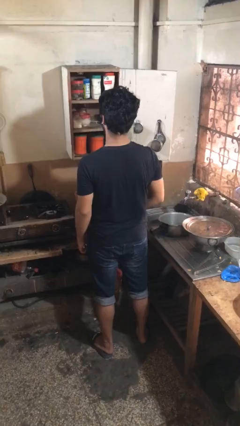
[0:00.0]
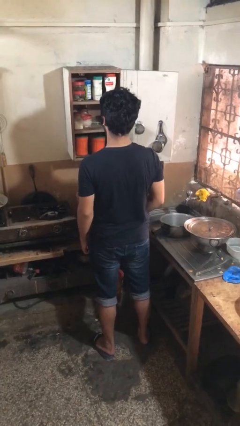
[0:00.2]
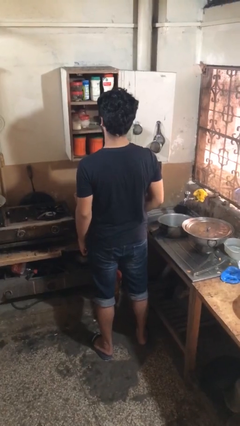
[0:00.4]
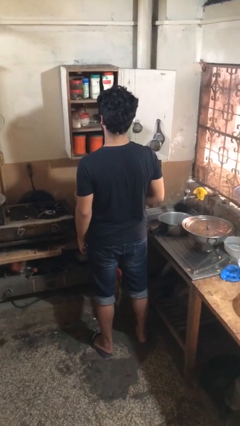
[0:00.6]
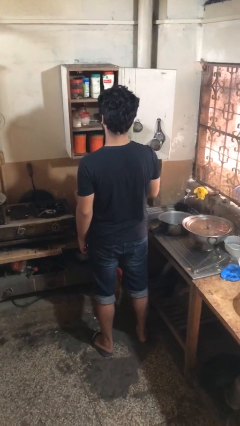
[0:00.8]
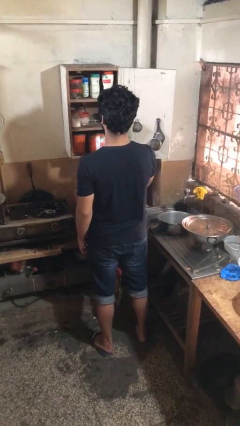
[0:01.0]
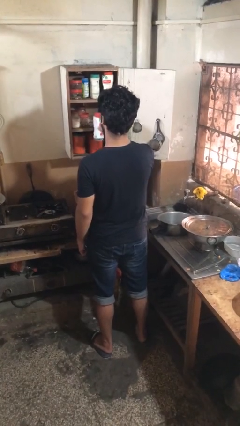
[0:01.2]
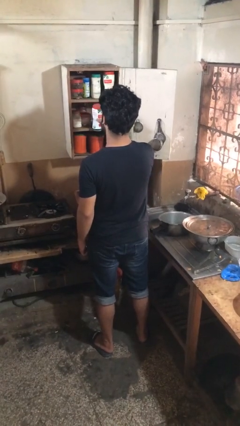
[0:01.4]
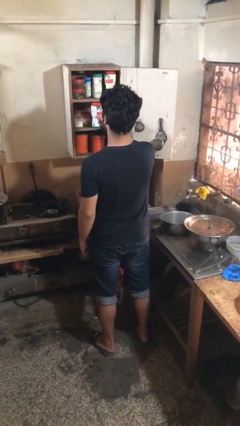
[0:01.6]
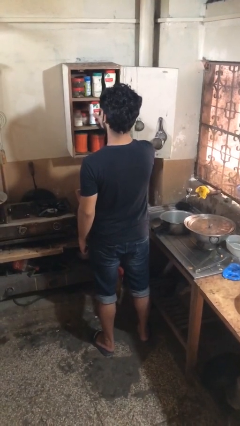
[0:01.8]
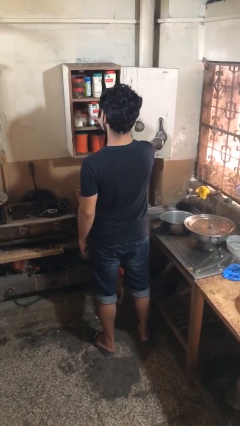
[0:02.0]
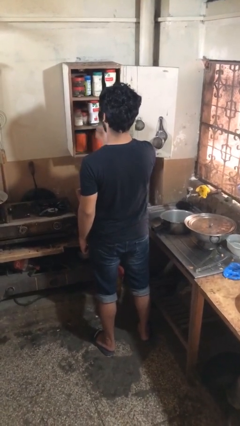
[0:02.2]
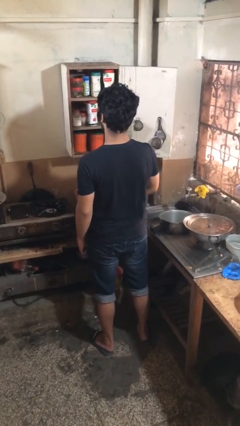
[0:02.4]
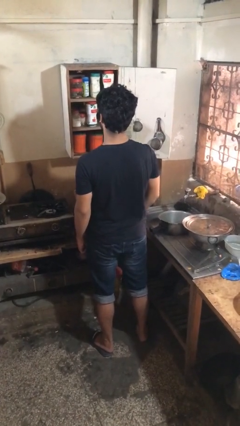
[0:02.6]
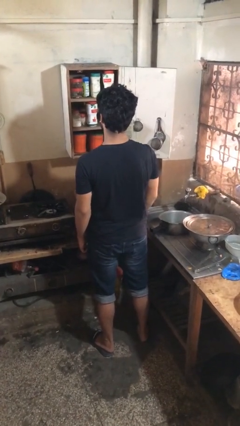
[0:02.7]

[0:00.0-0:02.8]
person puts down object into cabinet

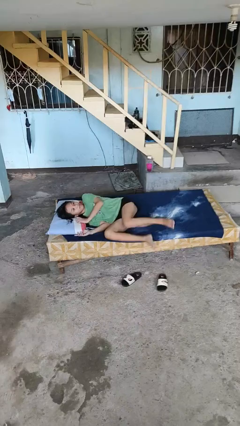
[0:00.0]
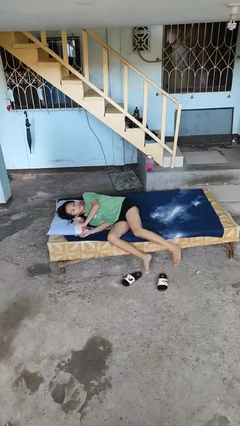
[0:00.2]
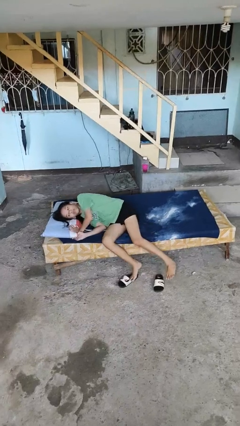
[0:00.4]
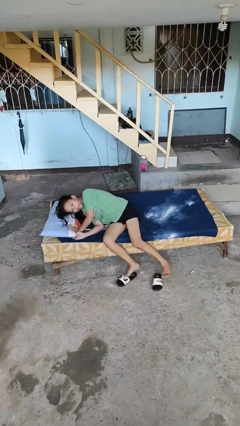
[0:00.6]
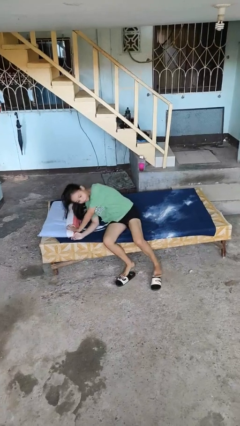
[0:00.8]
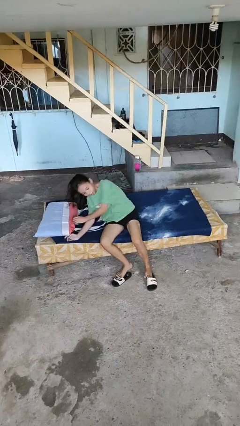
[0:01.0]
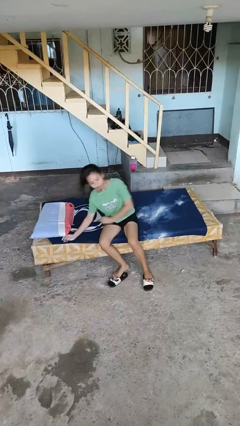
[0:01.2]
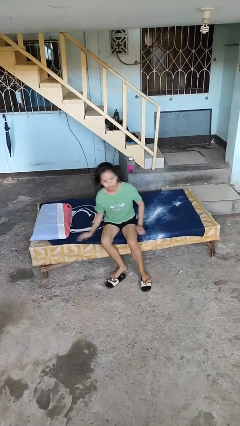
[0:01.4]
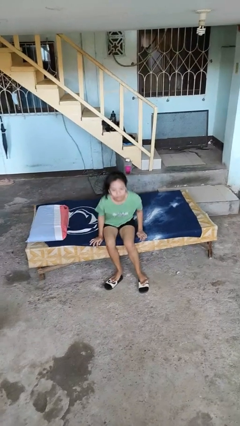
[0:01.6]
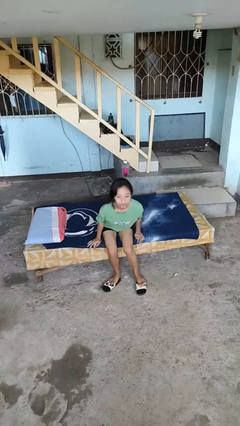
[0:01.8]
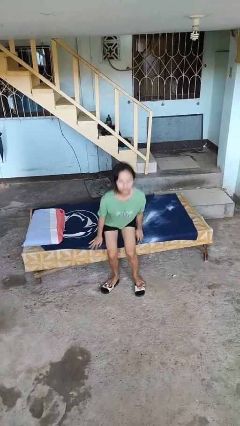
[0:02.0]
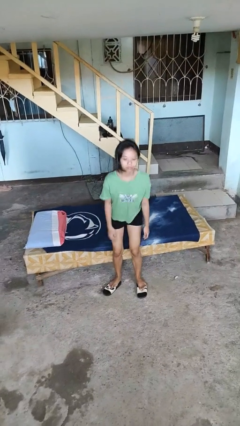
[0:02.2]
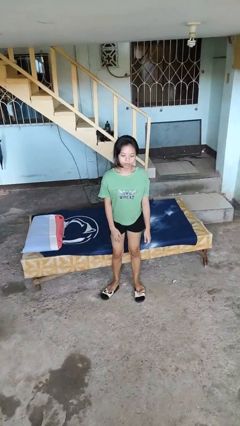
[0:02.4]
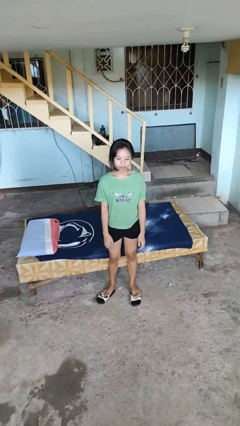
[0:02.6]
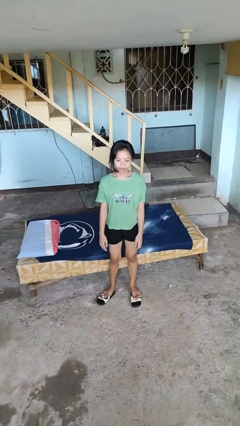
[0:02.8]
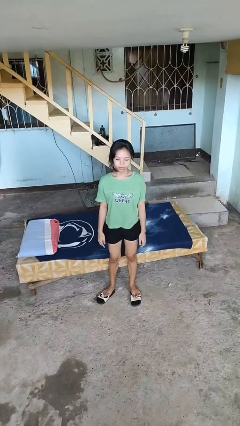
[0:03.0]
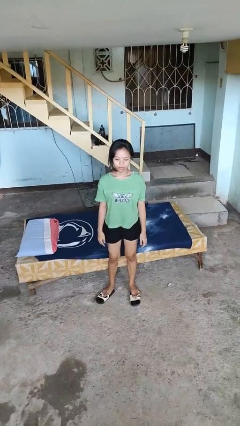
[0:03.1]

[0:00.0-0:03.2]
person stands up

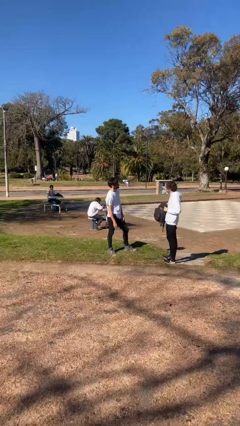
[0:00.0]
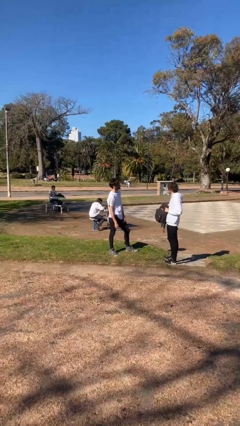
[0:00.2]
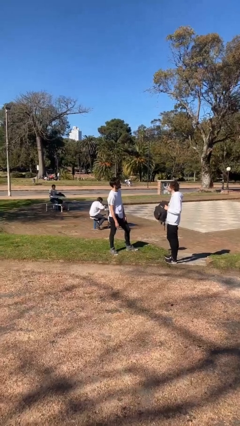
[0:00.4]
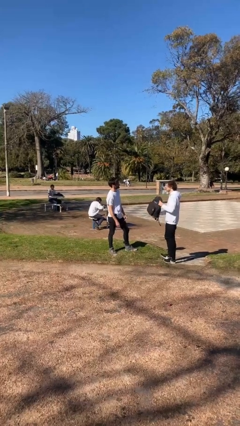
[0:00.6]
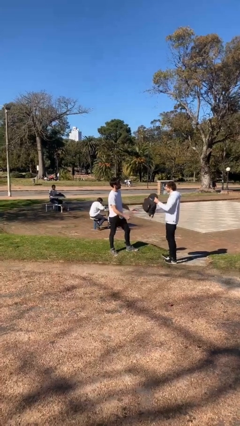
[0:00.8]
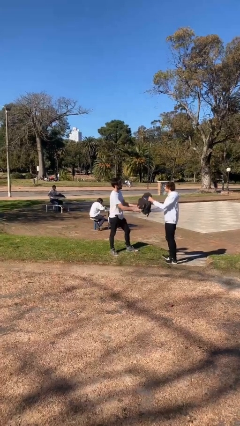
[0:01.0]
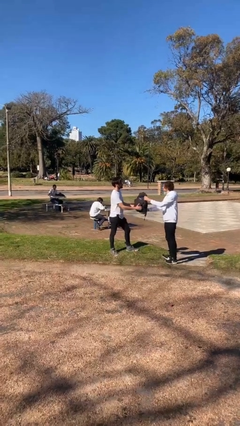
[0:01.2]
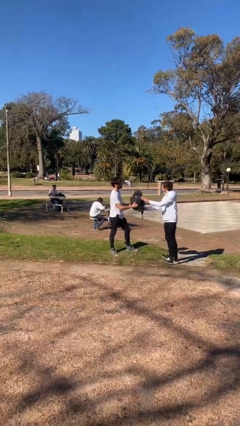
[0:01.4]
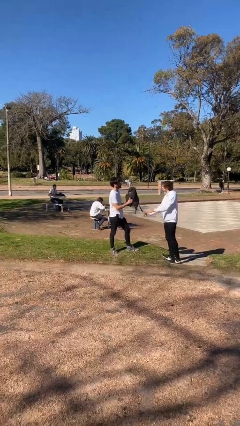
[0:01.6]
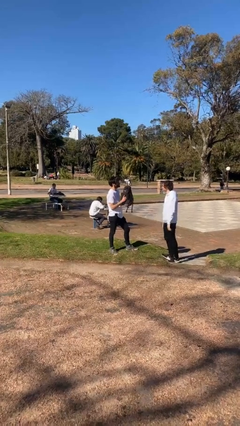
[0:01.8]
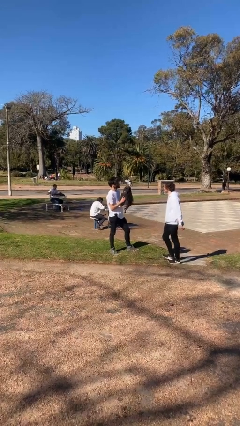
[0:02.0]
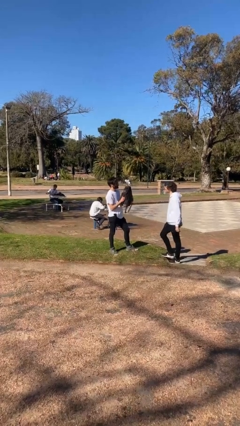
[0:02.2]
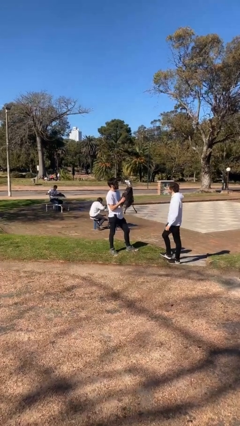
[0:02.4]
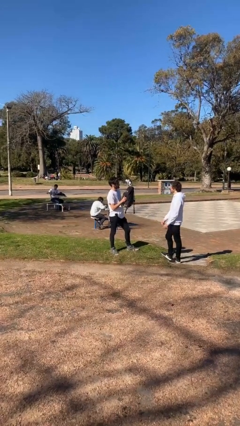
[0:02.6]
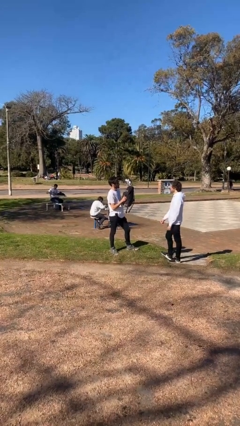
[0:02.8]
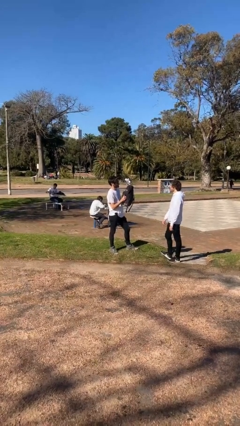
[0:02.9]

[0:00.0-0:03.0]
person transfers object to person

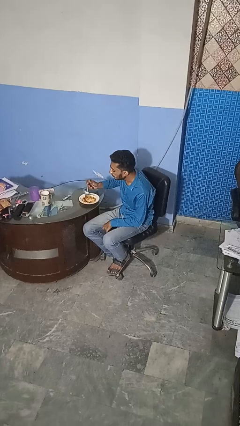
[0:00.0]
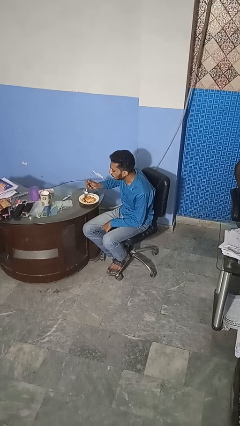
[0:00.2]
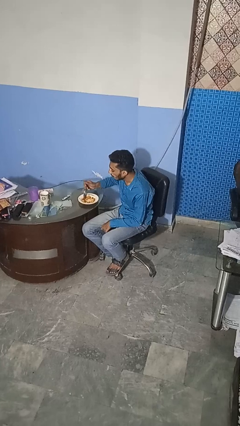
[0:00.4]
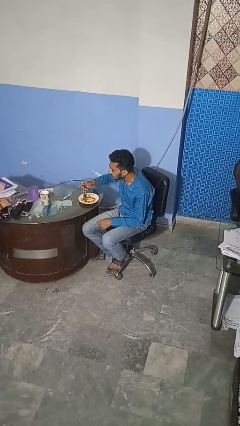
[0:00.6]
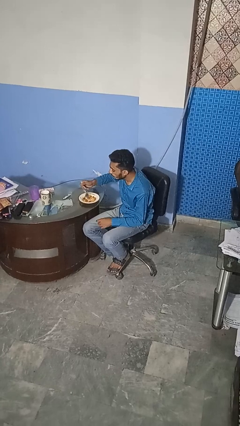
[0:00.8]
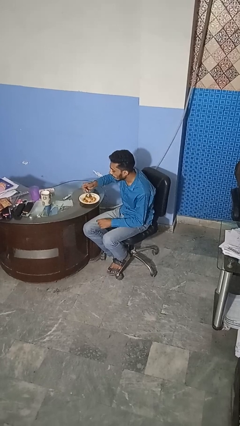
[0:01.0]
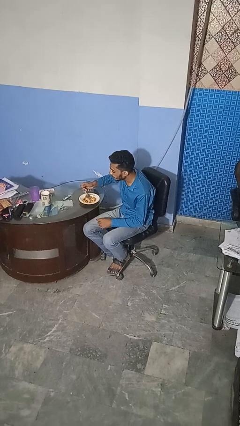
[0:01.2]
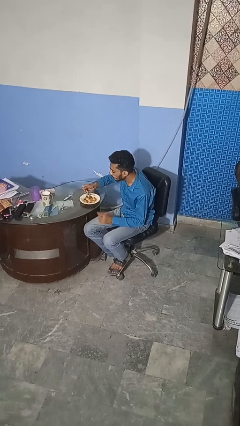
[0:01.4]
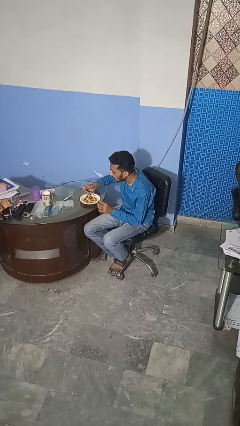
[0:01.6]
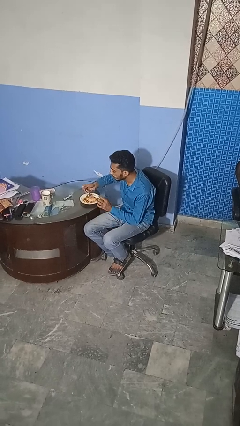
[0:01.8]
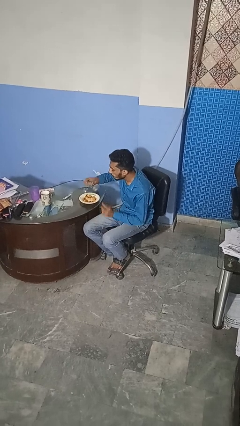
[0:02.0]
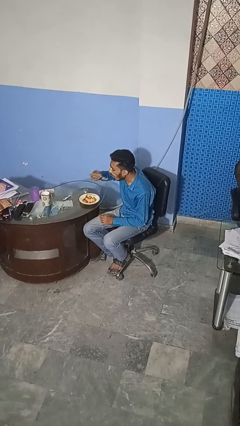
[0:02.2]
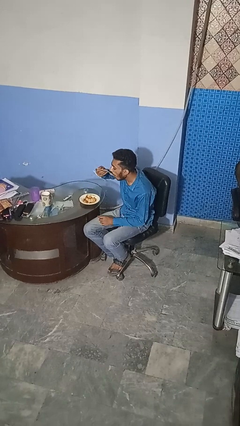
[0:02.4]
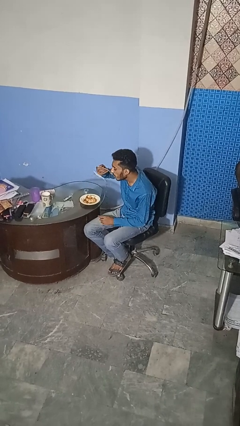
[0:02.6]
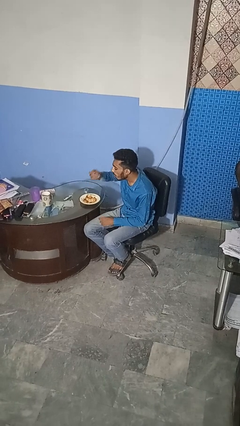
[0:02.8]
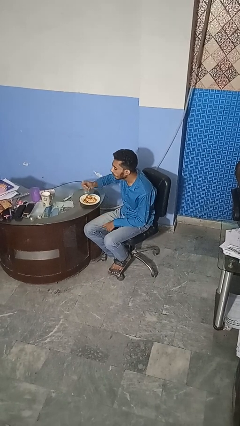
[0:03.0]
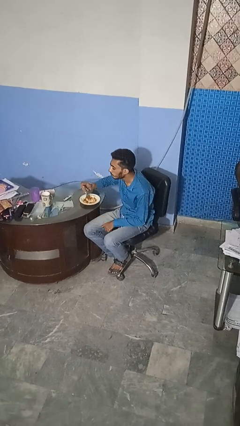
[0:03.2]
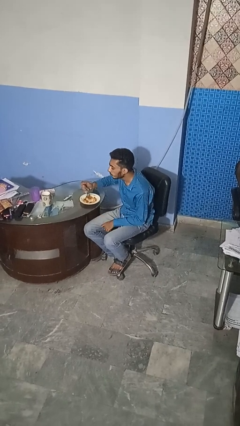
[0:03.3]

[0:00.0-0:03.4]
person eats with utensil

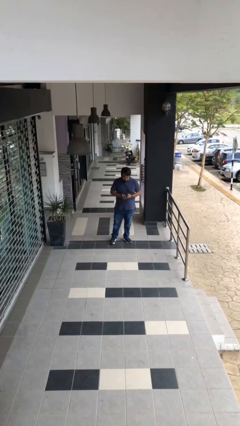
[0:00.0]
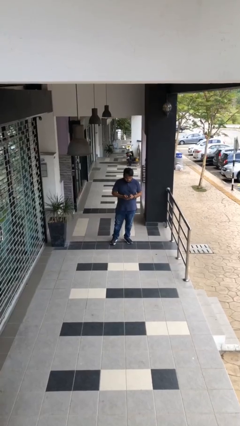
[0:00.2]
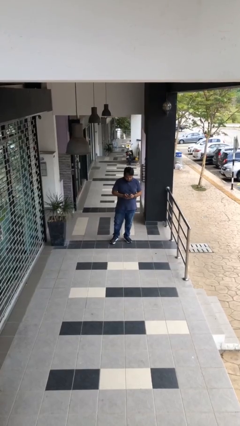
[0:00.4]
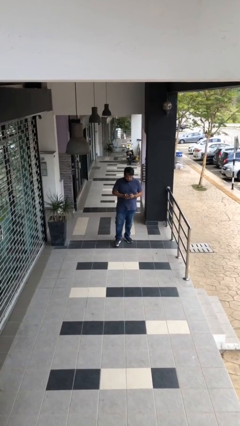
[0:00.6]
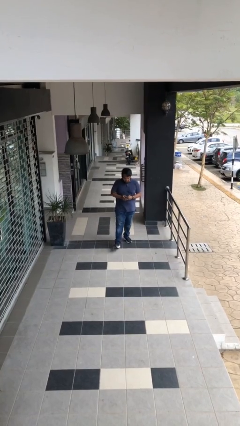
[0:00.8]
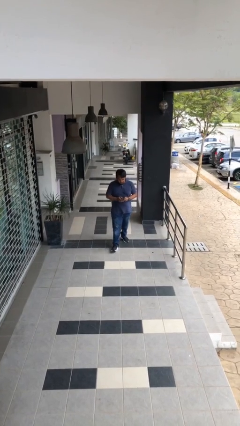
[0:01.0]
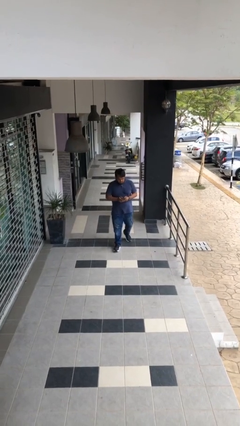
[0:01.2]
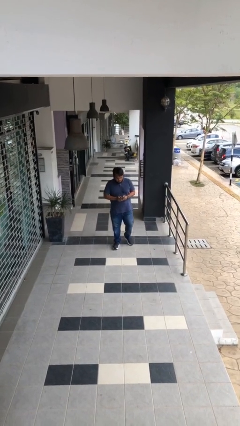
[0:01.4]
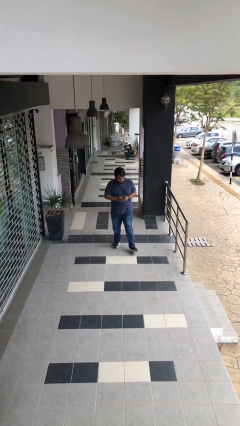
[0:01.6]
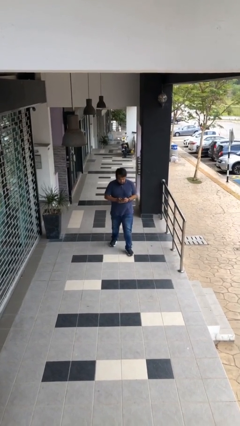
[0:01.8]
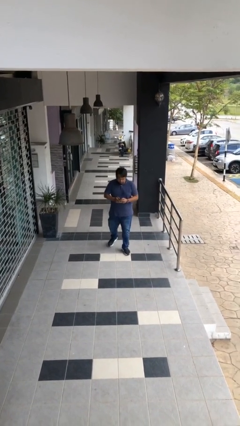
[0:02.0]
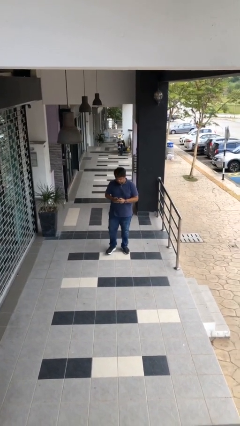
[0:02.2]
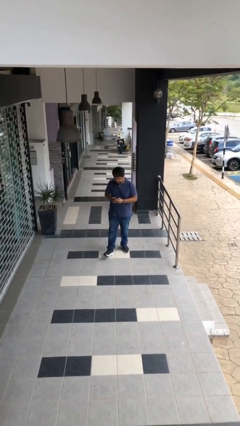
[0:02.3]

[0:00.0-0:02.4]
person texts on phone

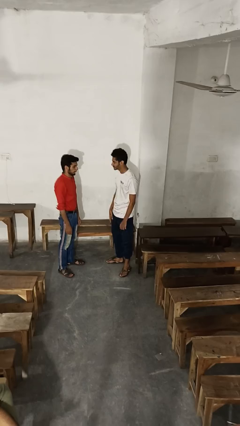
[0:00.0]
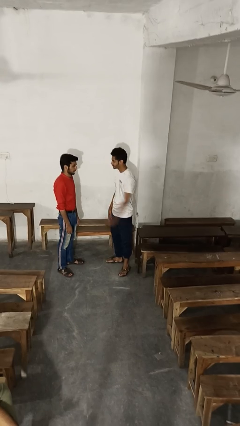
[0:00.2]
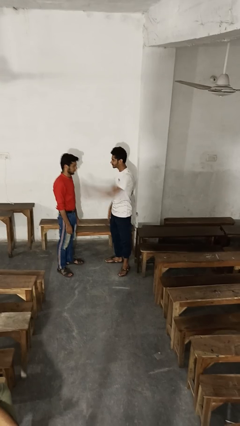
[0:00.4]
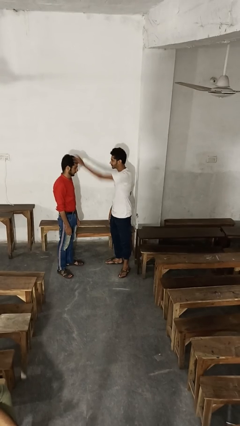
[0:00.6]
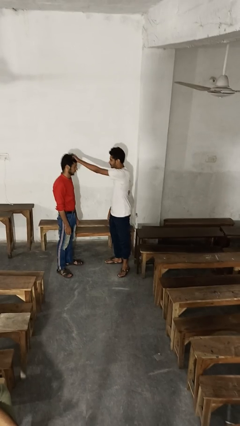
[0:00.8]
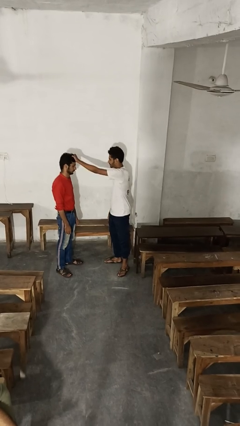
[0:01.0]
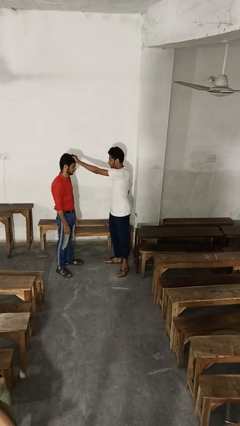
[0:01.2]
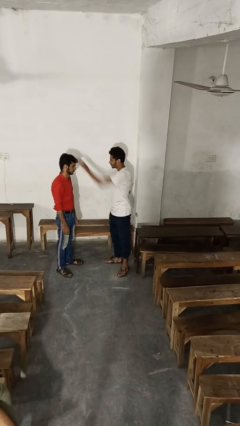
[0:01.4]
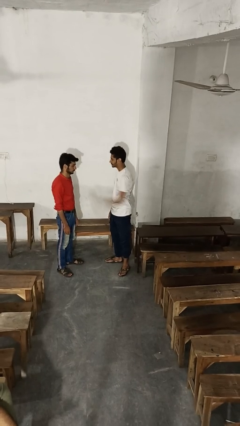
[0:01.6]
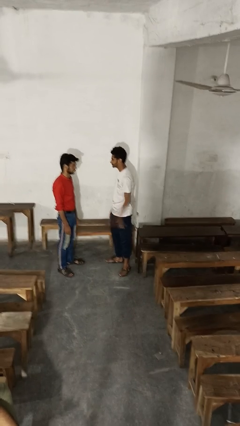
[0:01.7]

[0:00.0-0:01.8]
person grabs person by hair

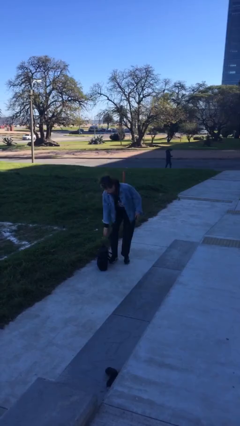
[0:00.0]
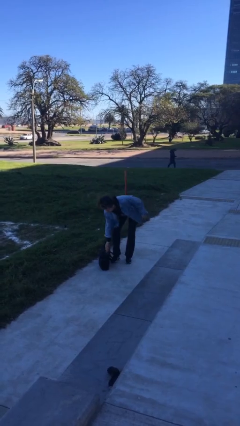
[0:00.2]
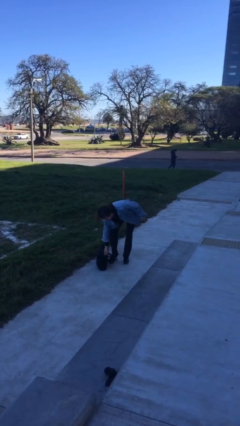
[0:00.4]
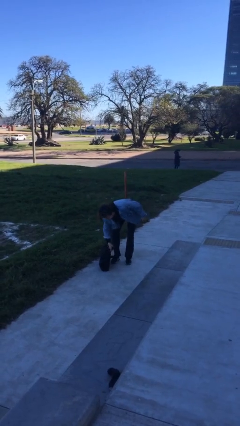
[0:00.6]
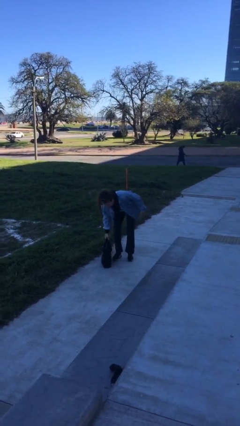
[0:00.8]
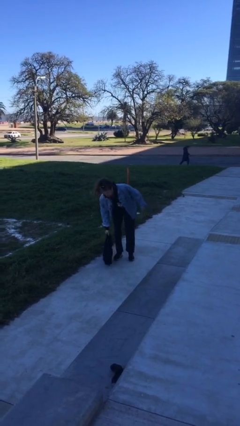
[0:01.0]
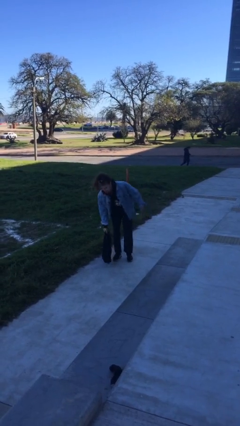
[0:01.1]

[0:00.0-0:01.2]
person picks up object from floor
